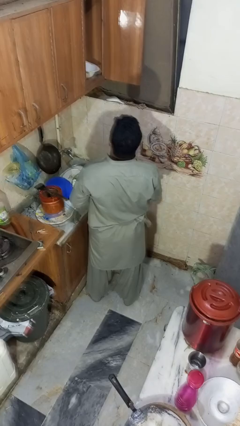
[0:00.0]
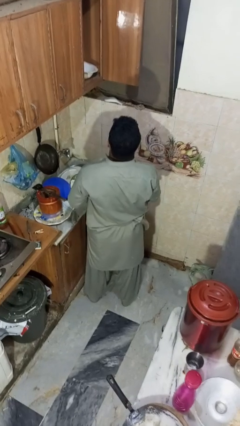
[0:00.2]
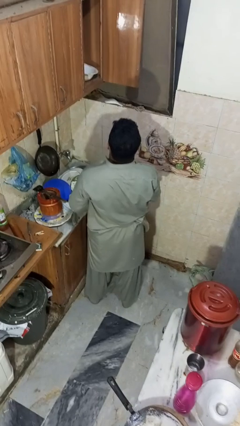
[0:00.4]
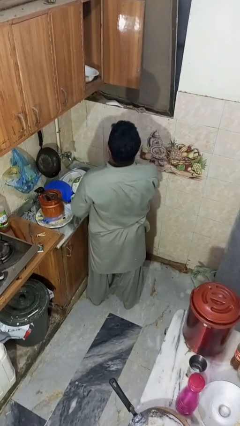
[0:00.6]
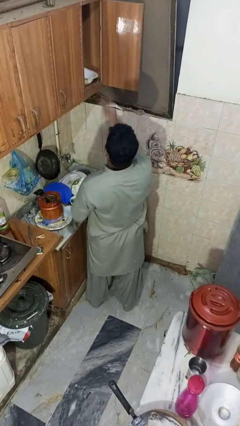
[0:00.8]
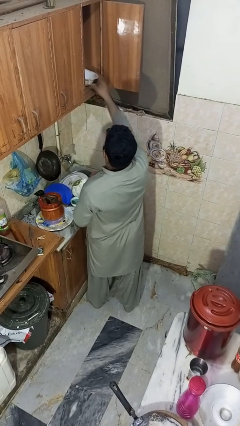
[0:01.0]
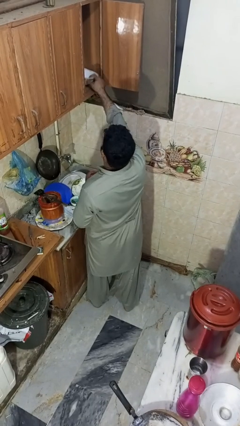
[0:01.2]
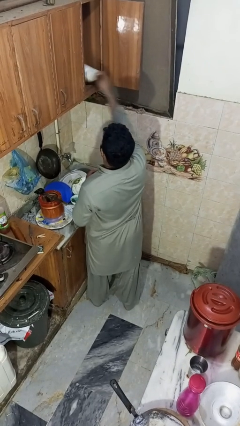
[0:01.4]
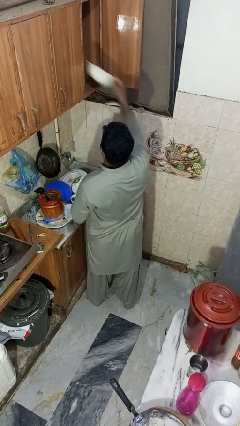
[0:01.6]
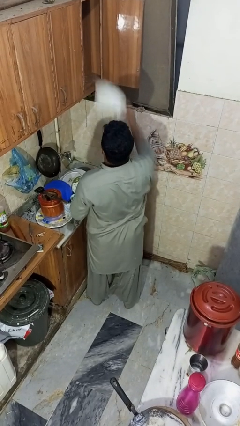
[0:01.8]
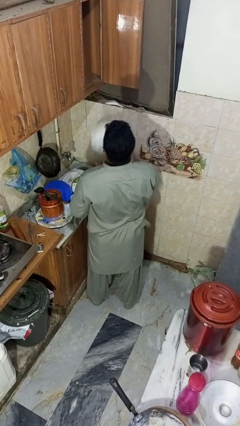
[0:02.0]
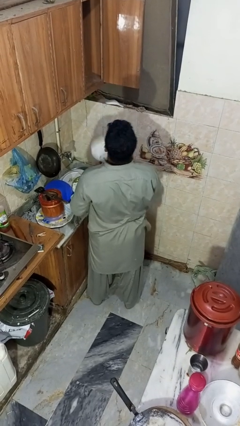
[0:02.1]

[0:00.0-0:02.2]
person takes object from cabinet

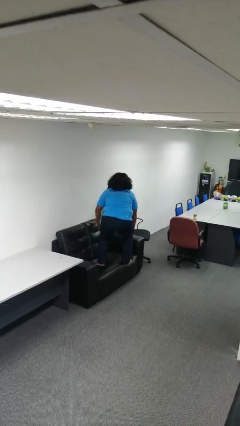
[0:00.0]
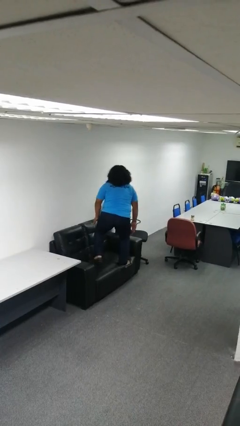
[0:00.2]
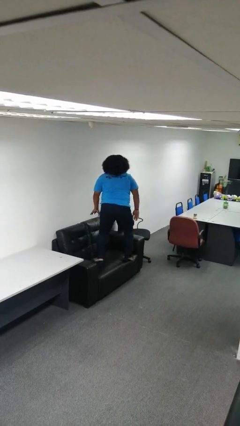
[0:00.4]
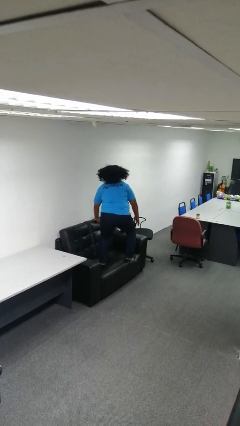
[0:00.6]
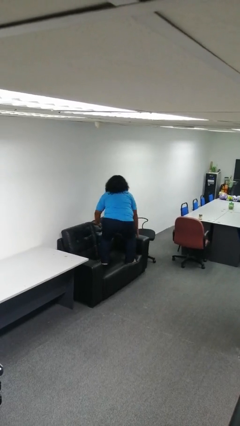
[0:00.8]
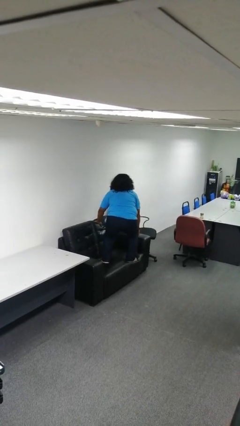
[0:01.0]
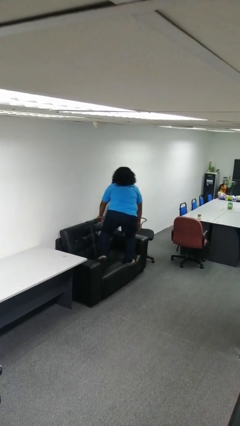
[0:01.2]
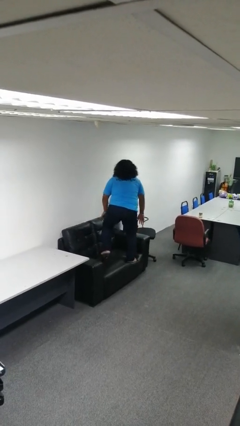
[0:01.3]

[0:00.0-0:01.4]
person jumps on couch

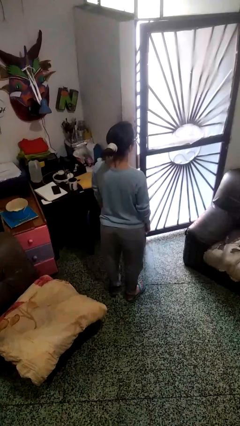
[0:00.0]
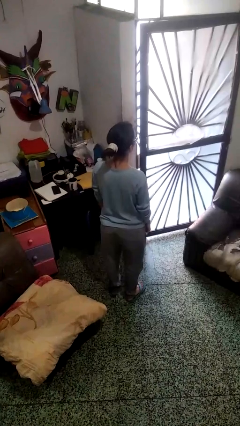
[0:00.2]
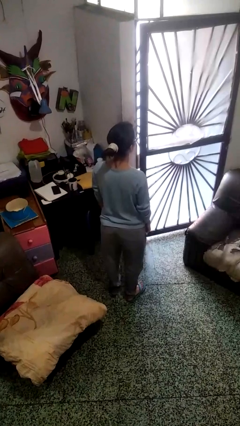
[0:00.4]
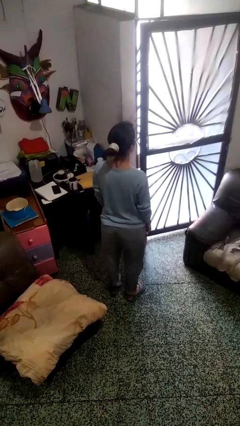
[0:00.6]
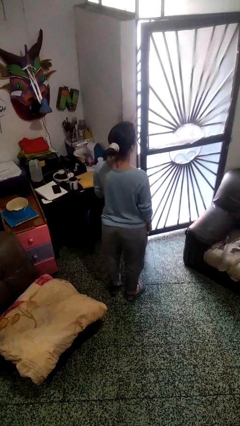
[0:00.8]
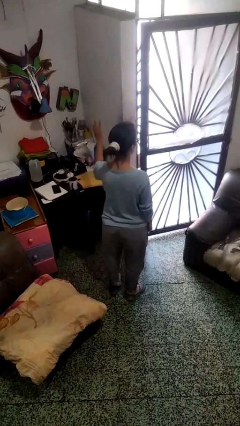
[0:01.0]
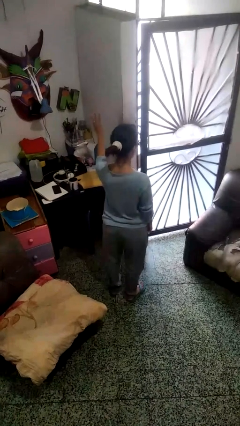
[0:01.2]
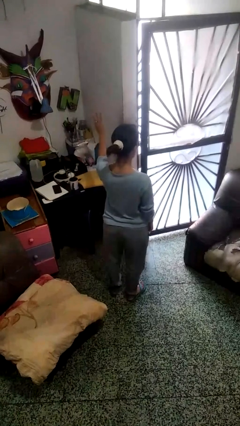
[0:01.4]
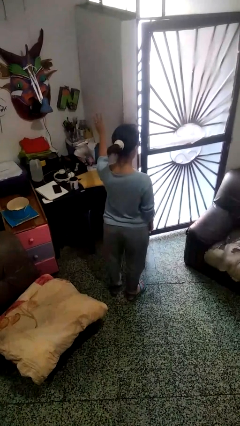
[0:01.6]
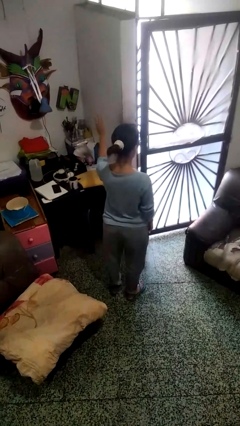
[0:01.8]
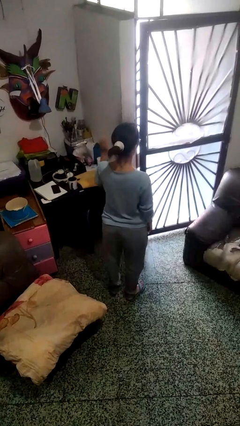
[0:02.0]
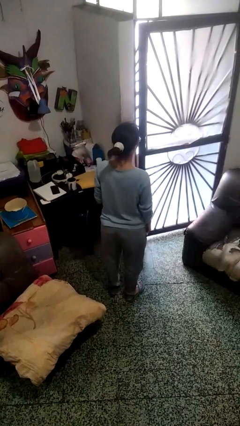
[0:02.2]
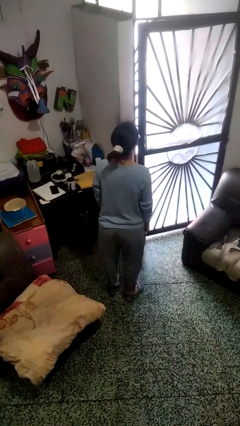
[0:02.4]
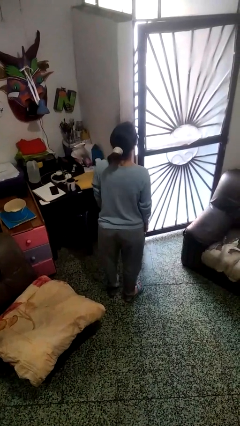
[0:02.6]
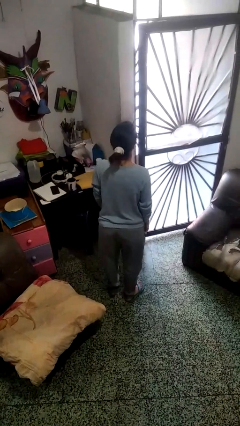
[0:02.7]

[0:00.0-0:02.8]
person gestures number three

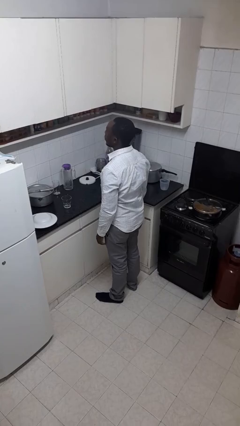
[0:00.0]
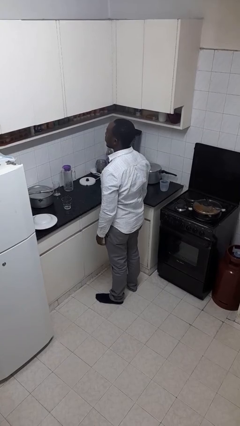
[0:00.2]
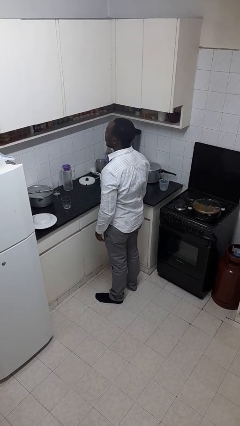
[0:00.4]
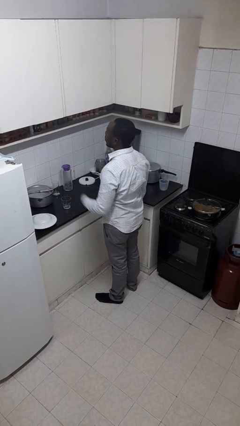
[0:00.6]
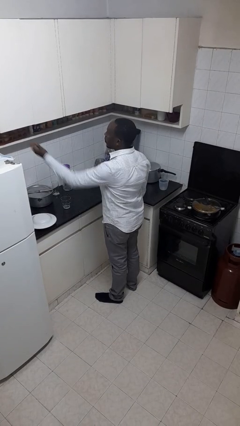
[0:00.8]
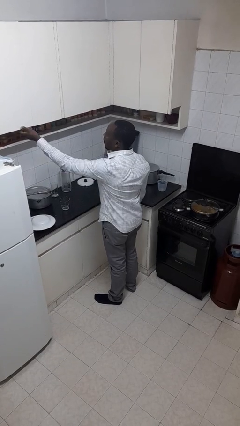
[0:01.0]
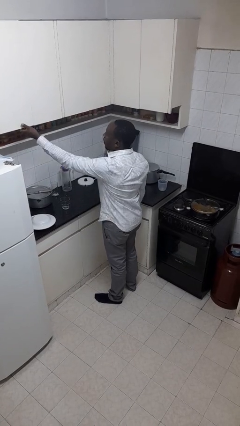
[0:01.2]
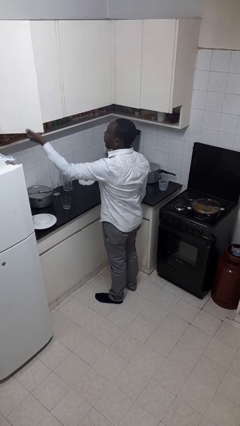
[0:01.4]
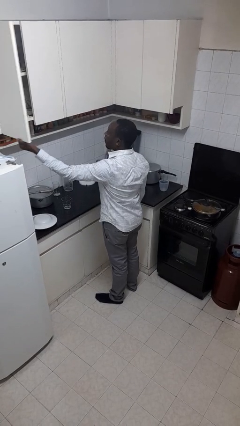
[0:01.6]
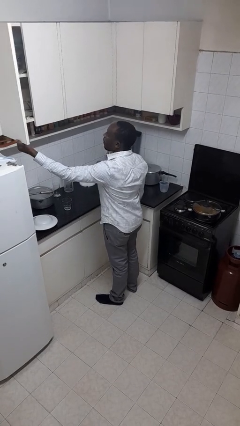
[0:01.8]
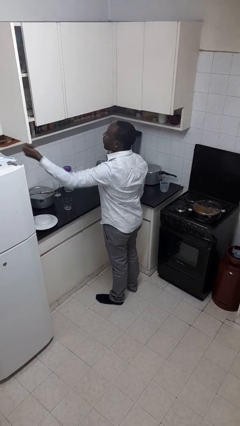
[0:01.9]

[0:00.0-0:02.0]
person opens cabinet

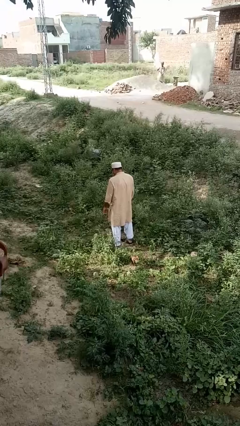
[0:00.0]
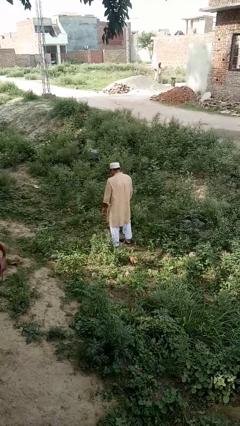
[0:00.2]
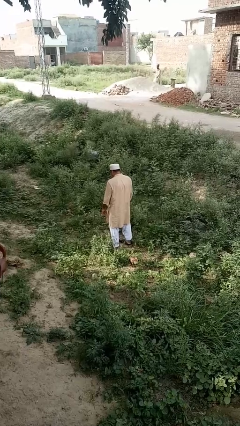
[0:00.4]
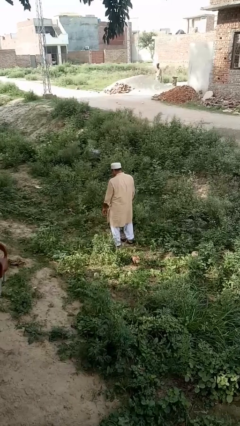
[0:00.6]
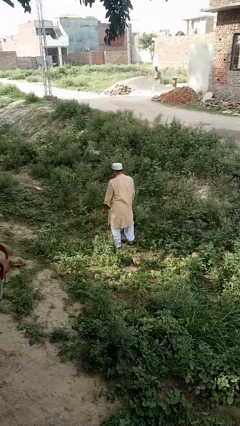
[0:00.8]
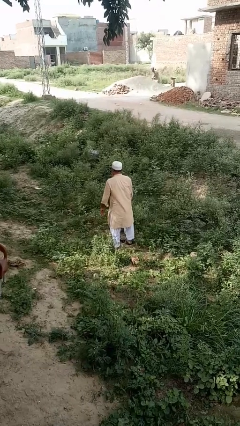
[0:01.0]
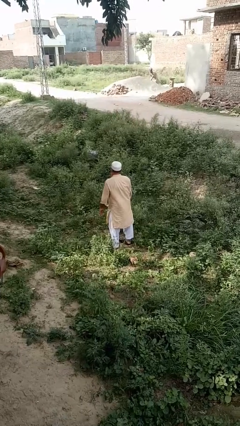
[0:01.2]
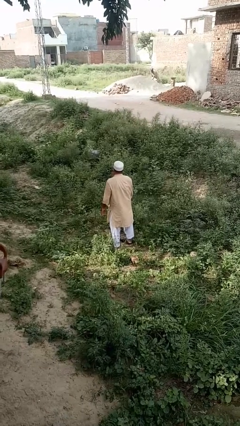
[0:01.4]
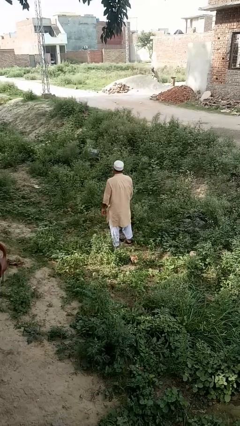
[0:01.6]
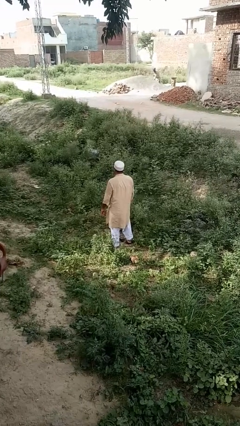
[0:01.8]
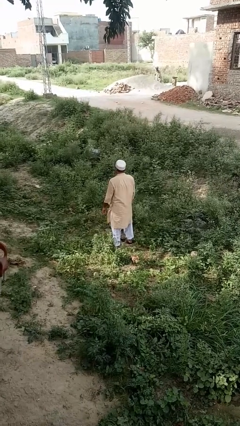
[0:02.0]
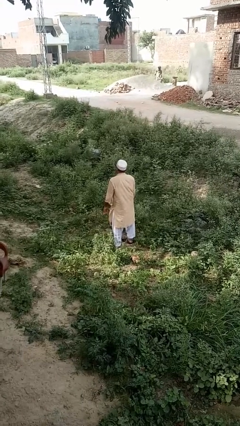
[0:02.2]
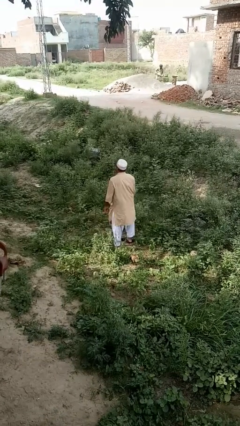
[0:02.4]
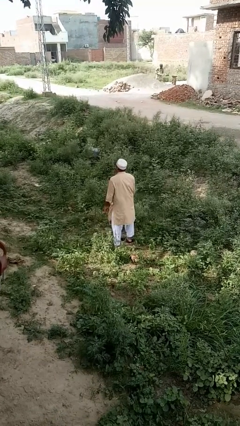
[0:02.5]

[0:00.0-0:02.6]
person wiggles hips

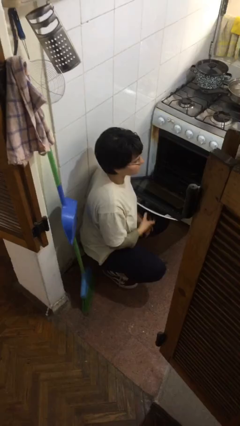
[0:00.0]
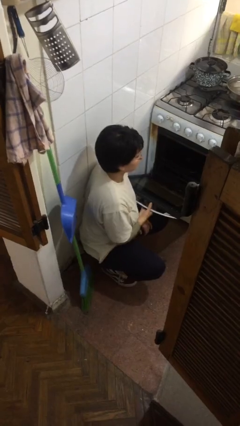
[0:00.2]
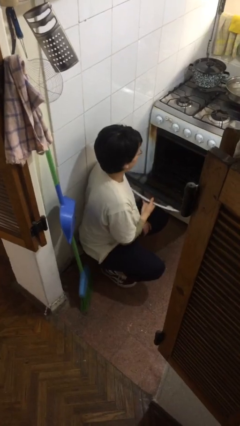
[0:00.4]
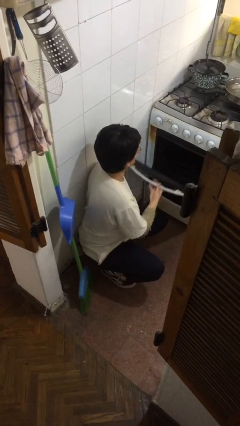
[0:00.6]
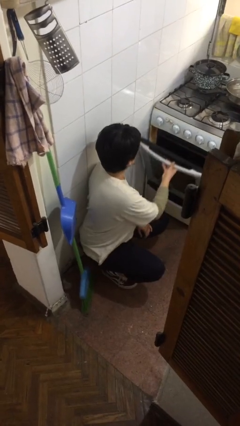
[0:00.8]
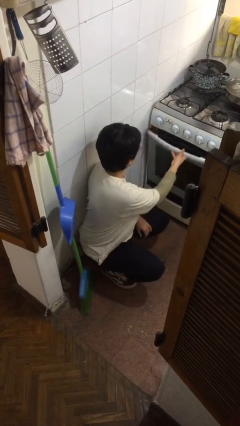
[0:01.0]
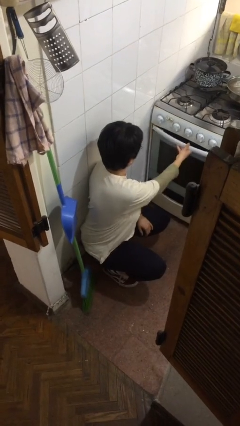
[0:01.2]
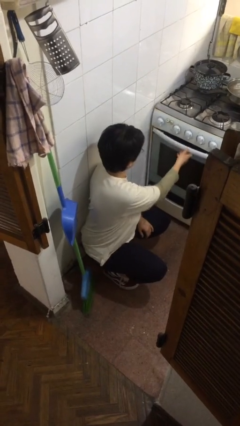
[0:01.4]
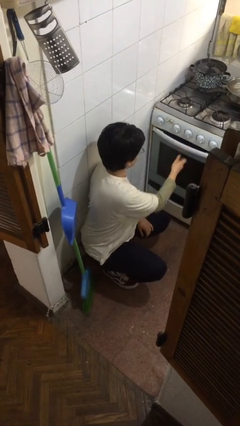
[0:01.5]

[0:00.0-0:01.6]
person closes oven door

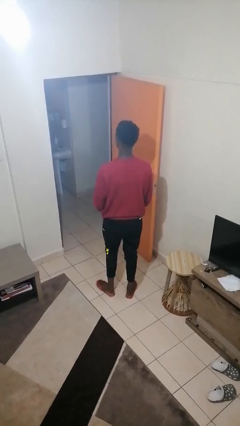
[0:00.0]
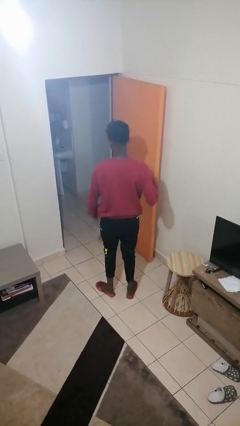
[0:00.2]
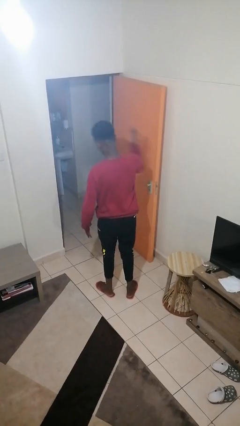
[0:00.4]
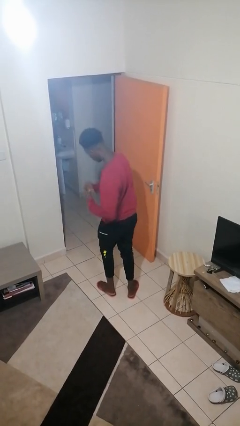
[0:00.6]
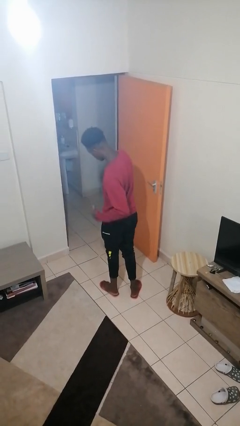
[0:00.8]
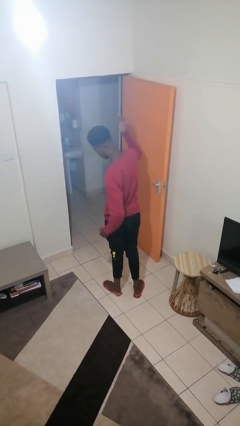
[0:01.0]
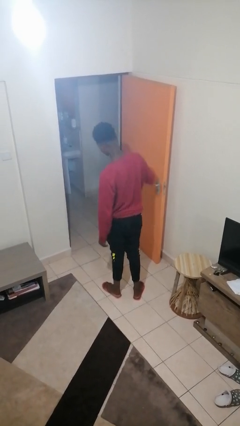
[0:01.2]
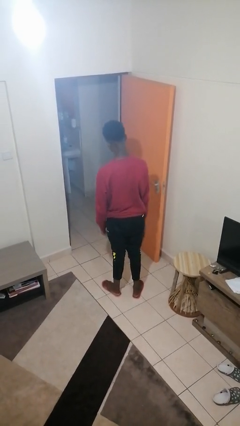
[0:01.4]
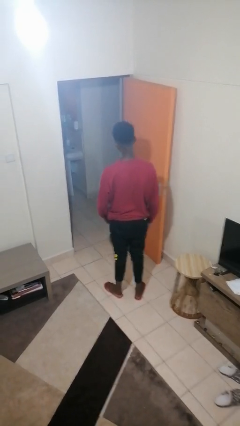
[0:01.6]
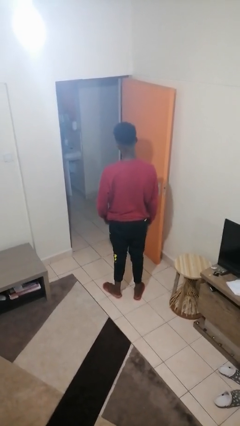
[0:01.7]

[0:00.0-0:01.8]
person karate chop

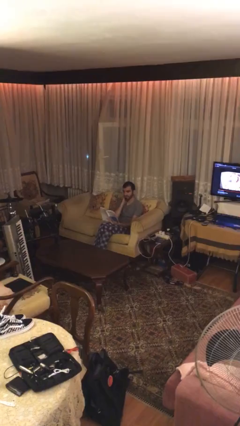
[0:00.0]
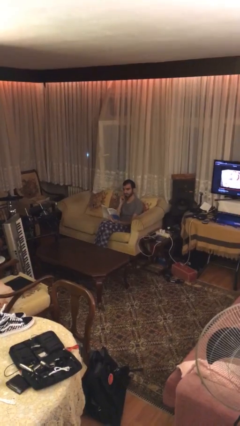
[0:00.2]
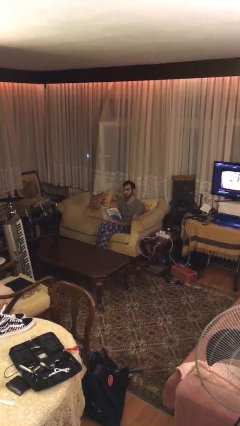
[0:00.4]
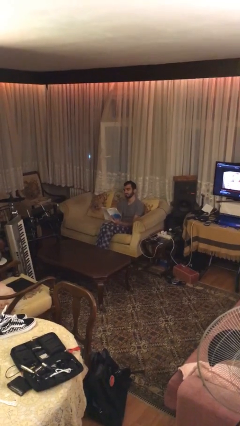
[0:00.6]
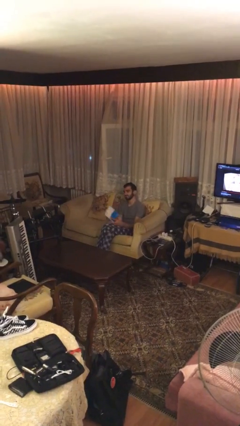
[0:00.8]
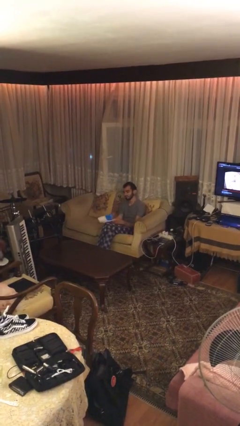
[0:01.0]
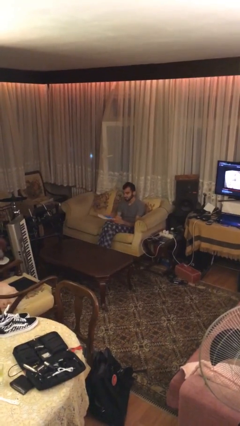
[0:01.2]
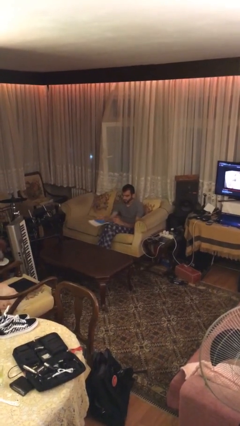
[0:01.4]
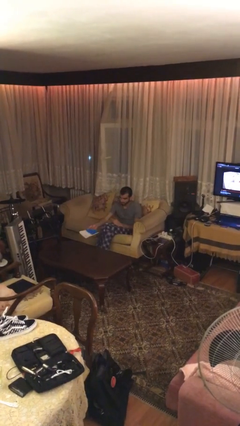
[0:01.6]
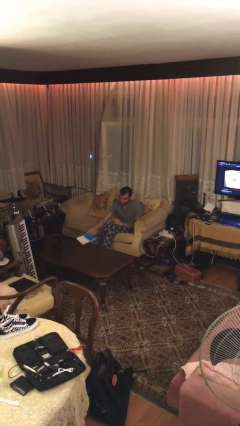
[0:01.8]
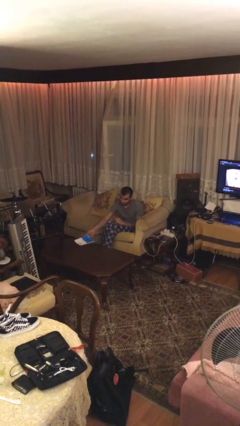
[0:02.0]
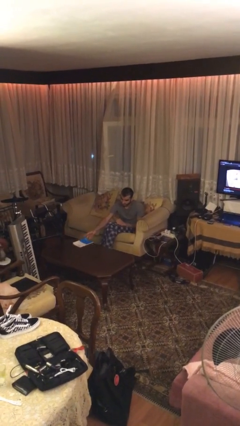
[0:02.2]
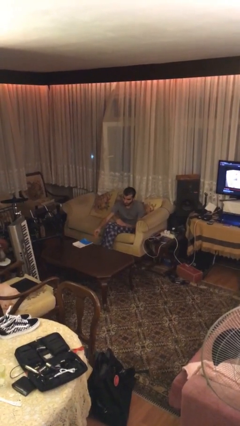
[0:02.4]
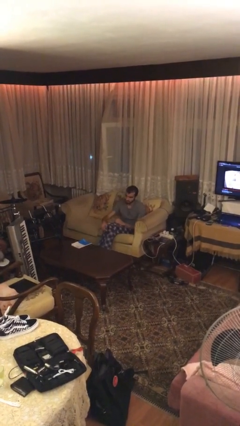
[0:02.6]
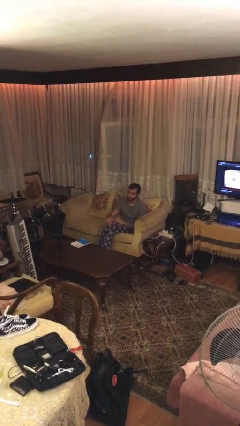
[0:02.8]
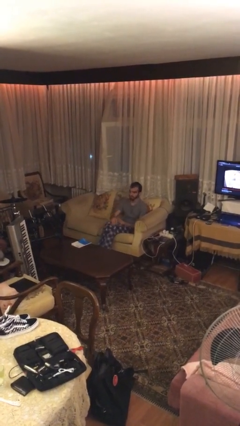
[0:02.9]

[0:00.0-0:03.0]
person puts down object on table
